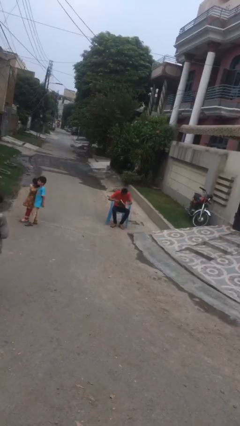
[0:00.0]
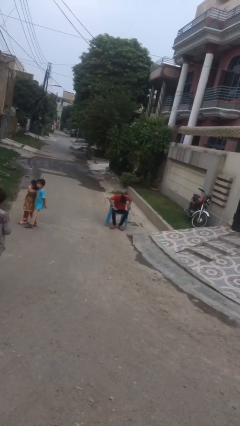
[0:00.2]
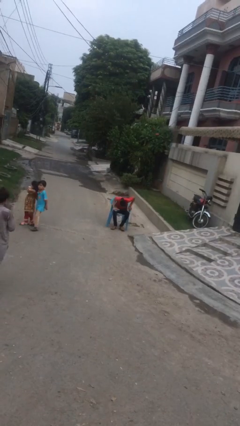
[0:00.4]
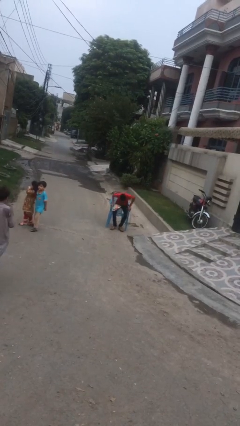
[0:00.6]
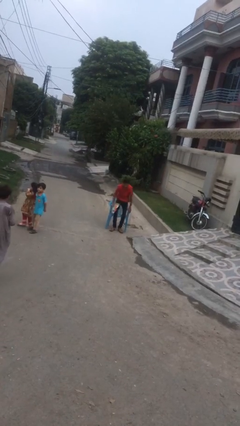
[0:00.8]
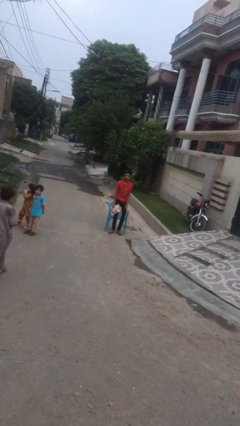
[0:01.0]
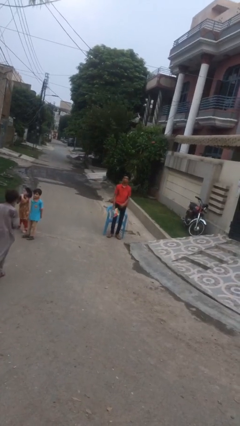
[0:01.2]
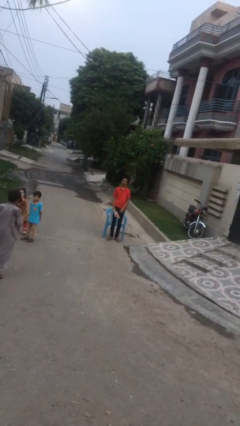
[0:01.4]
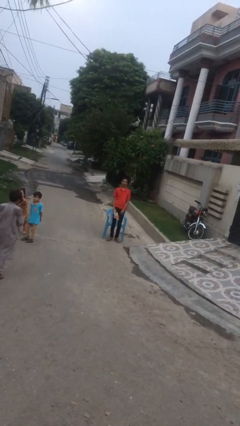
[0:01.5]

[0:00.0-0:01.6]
person stands up

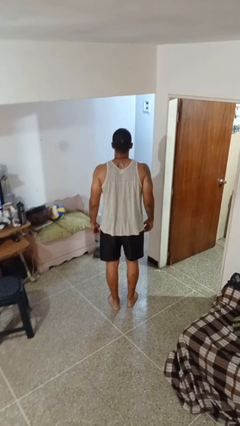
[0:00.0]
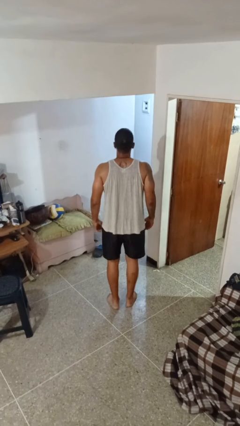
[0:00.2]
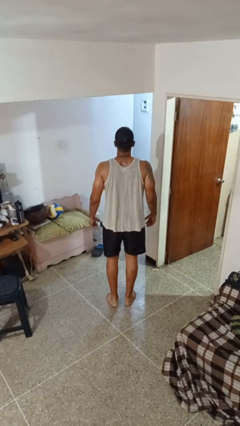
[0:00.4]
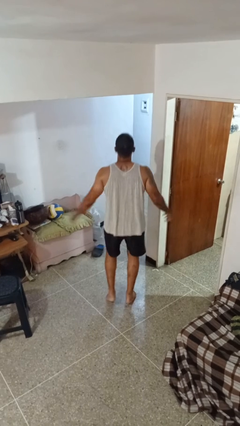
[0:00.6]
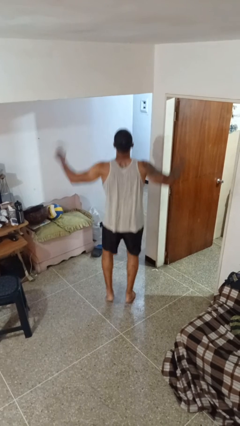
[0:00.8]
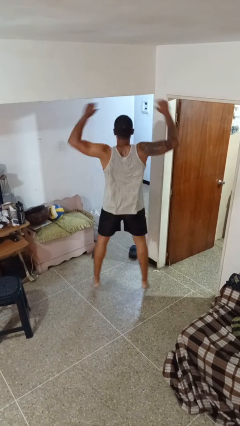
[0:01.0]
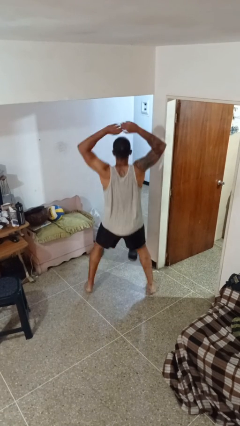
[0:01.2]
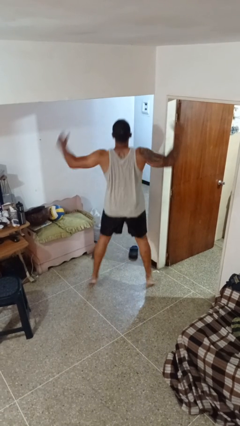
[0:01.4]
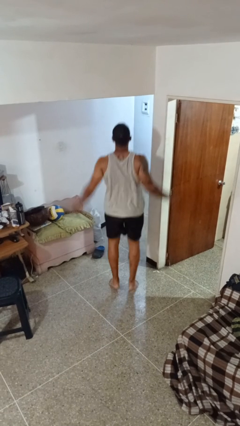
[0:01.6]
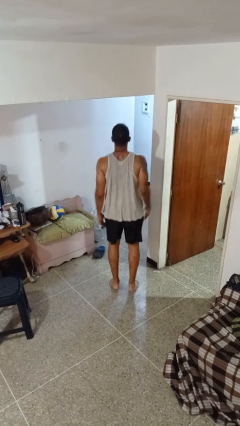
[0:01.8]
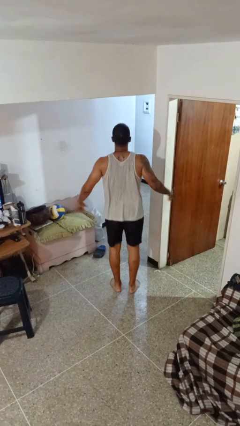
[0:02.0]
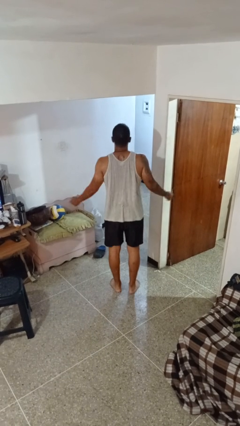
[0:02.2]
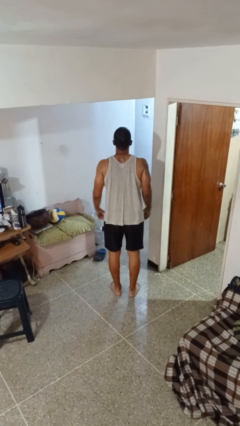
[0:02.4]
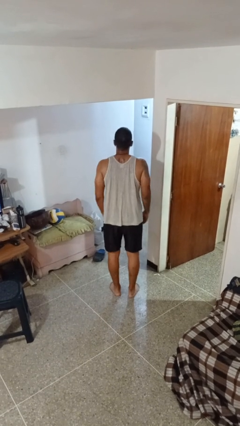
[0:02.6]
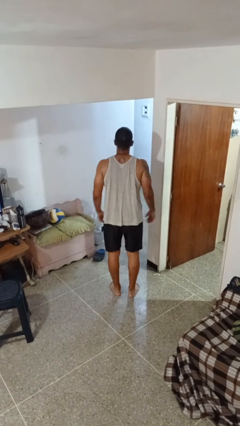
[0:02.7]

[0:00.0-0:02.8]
person exercises with jumping jacks

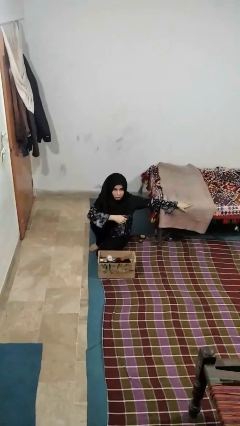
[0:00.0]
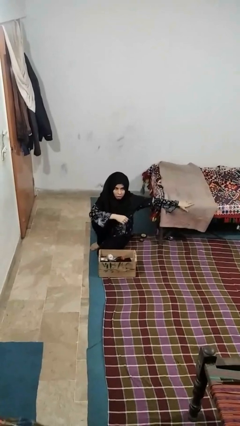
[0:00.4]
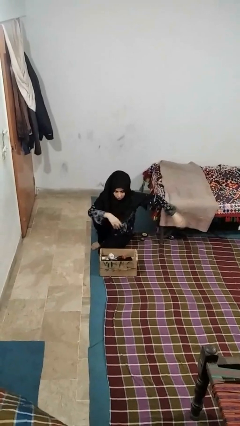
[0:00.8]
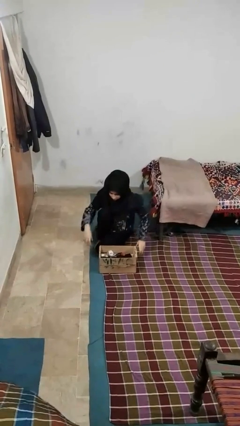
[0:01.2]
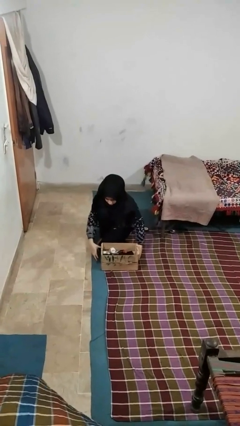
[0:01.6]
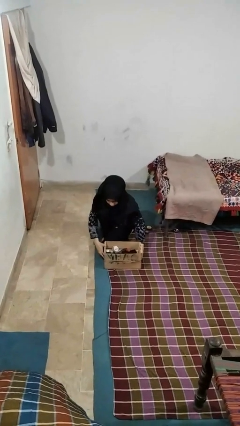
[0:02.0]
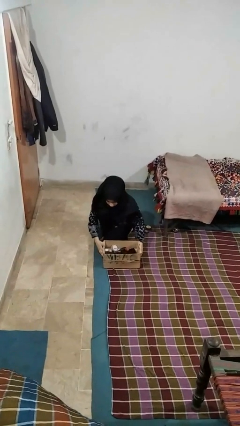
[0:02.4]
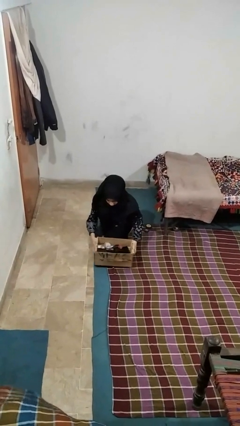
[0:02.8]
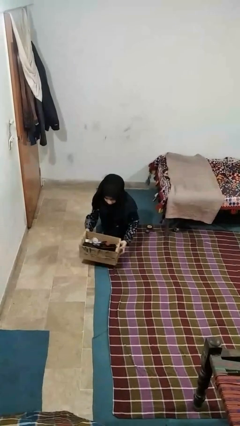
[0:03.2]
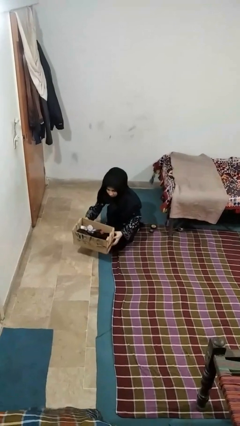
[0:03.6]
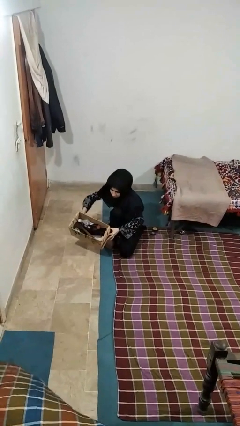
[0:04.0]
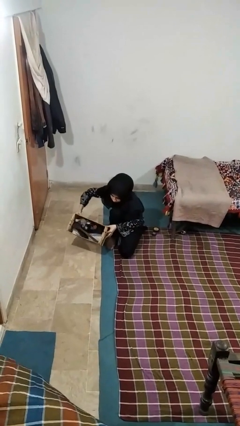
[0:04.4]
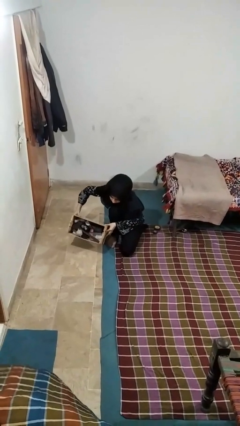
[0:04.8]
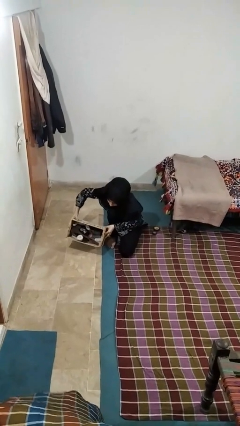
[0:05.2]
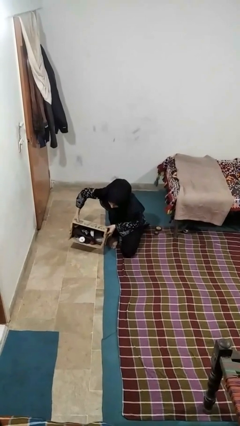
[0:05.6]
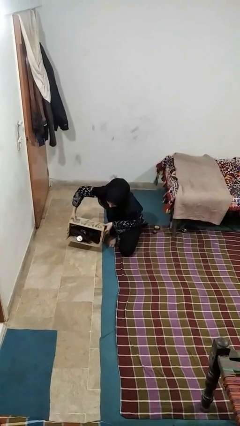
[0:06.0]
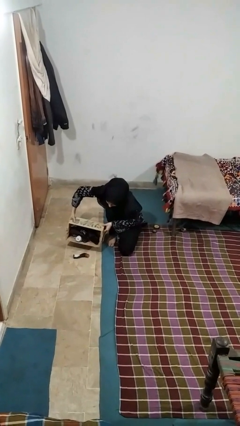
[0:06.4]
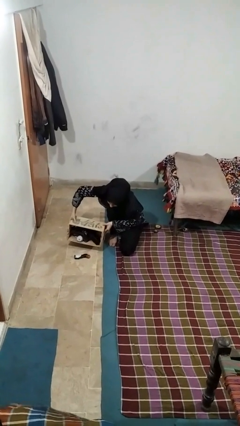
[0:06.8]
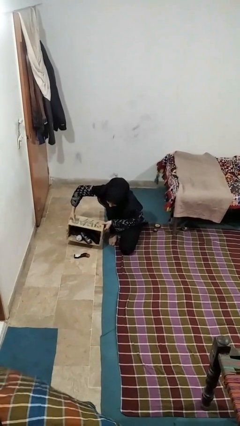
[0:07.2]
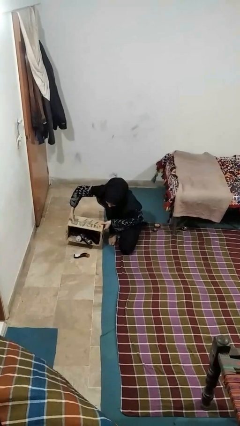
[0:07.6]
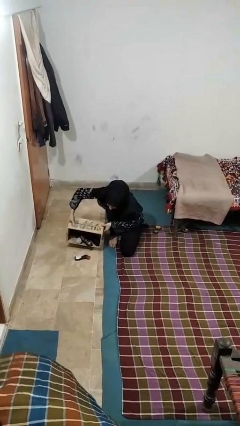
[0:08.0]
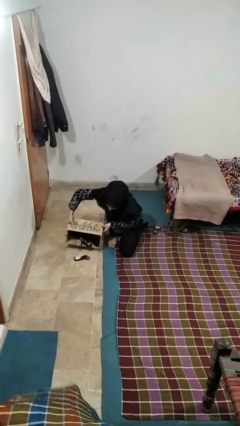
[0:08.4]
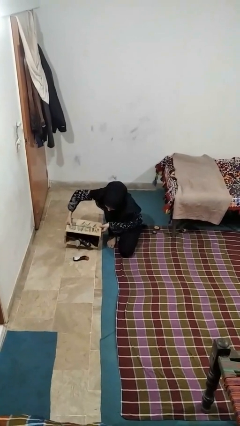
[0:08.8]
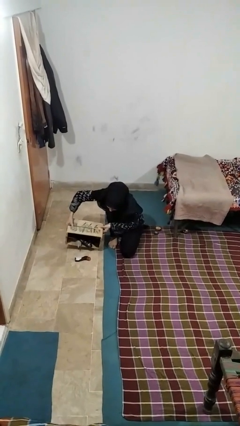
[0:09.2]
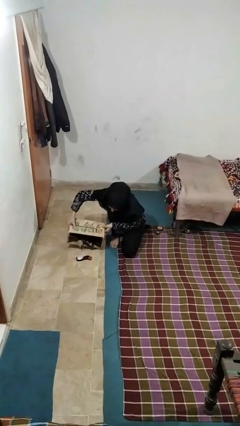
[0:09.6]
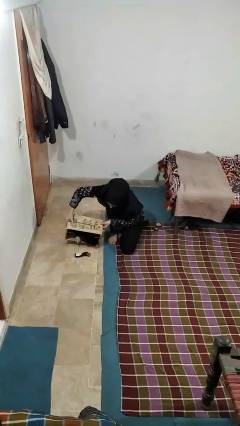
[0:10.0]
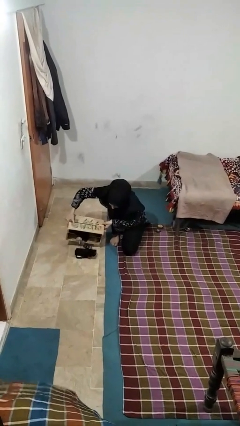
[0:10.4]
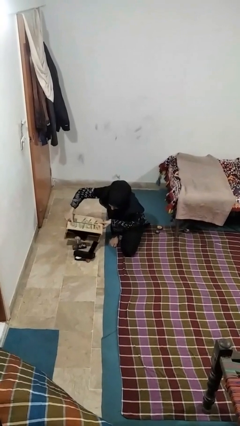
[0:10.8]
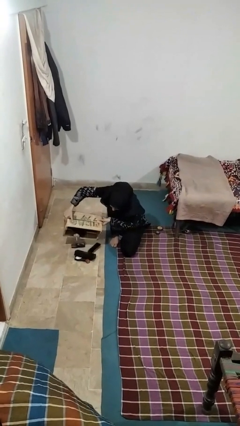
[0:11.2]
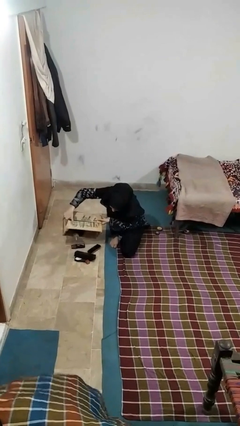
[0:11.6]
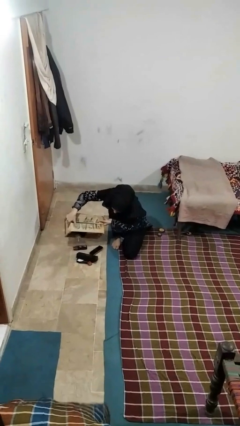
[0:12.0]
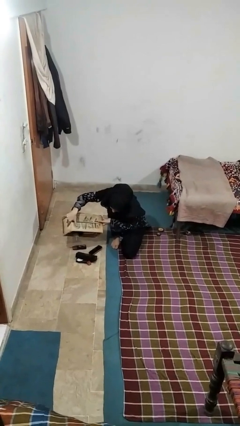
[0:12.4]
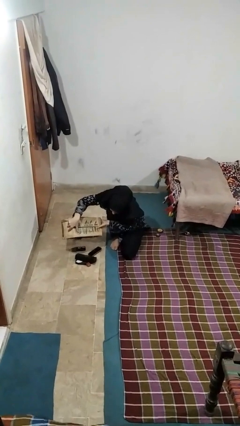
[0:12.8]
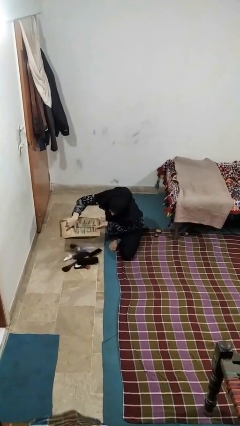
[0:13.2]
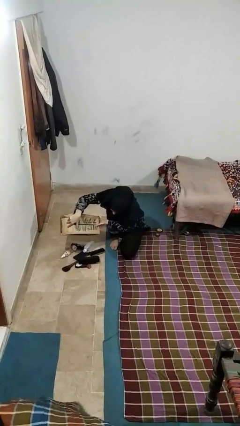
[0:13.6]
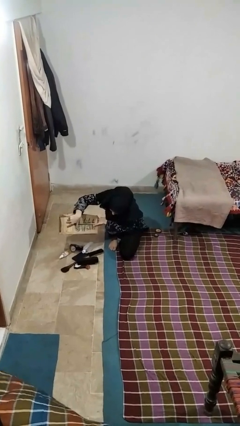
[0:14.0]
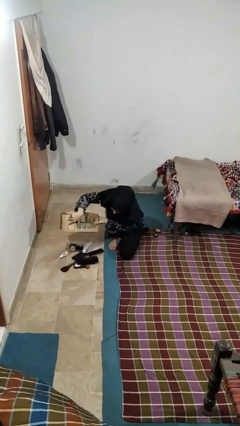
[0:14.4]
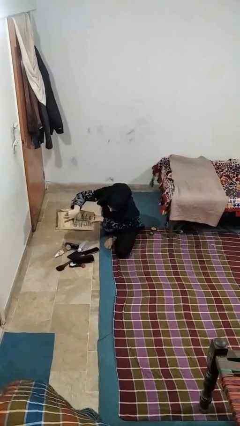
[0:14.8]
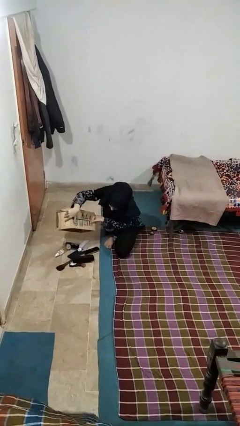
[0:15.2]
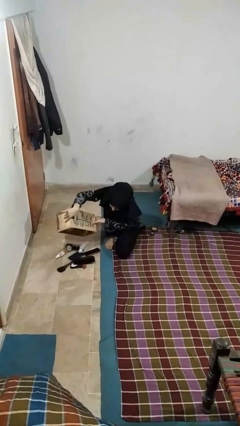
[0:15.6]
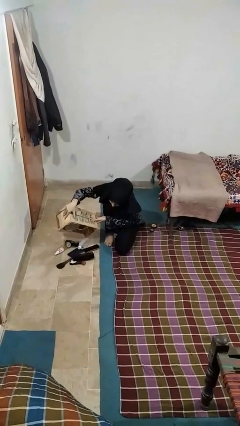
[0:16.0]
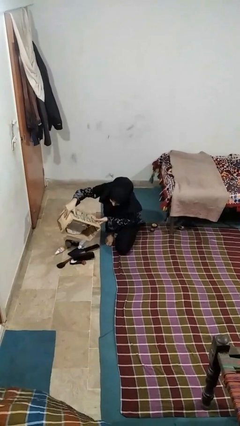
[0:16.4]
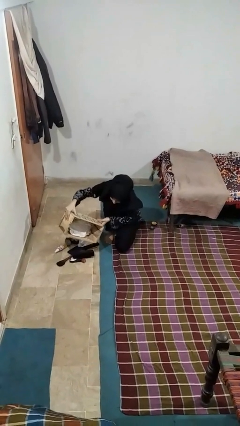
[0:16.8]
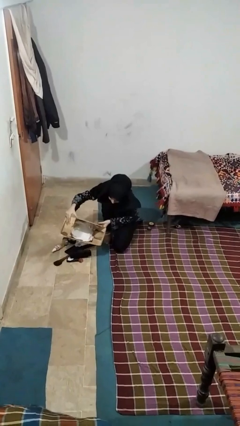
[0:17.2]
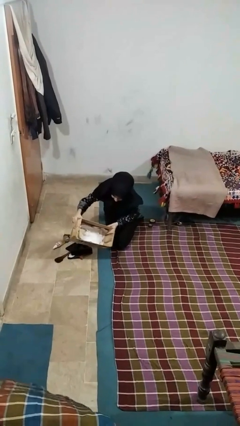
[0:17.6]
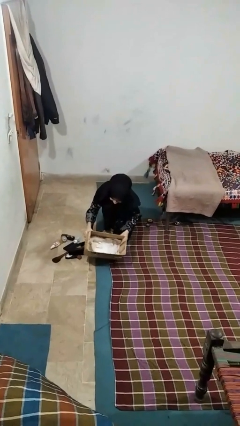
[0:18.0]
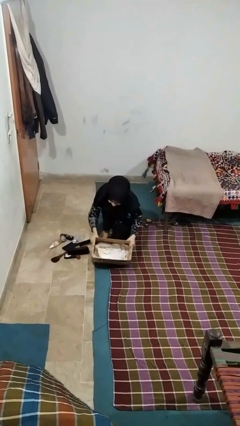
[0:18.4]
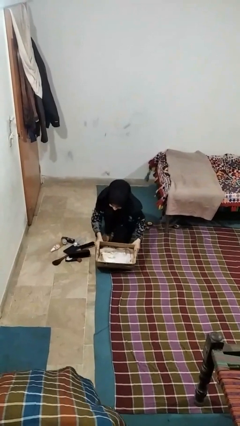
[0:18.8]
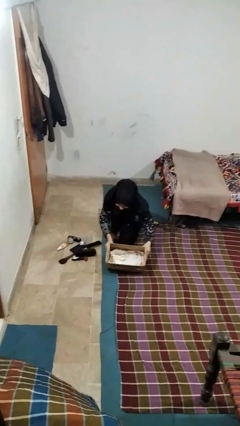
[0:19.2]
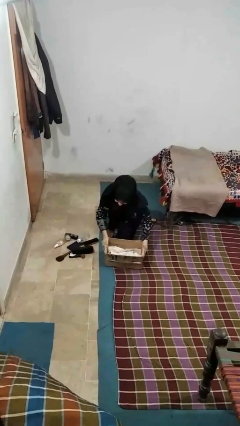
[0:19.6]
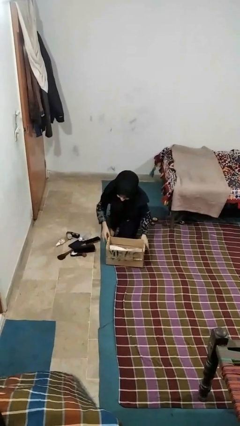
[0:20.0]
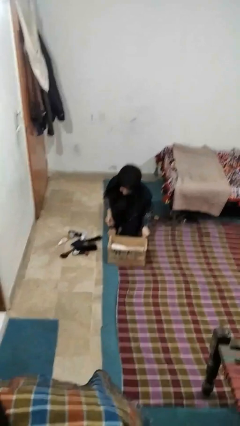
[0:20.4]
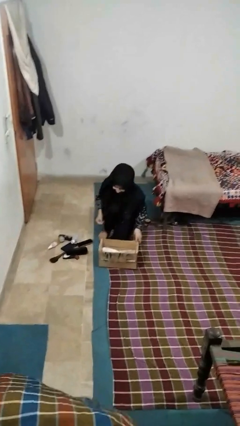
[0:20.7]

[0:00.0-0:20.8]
person unloads box onto floor

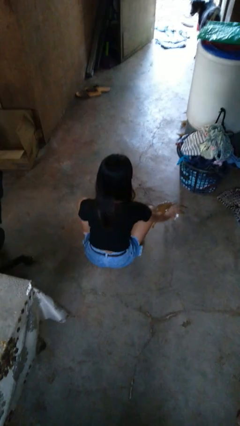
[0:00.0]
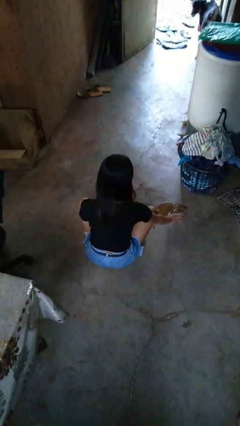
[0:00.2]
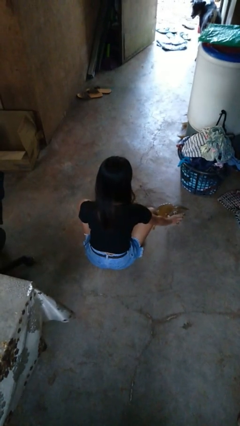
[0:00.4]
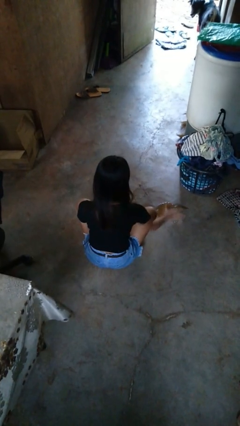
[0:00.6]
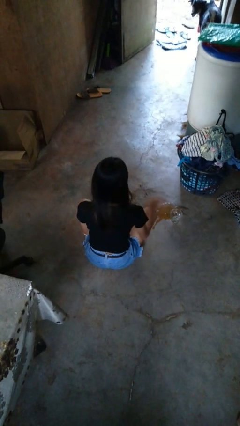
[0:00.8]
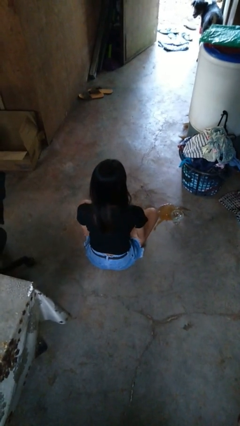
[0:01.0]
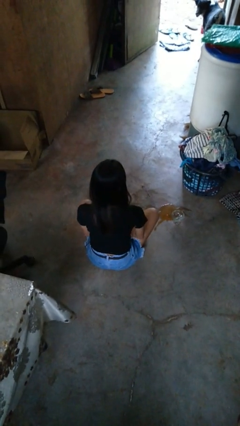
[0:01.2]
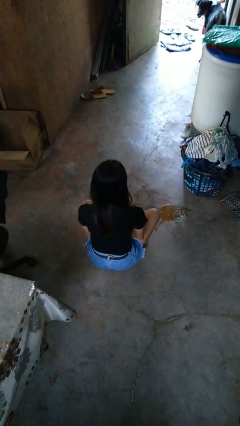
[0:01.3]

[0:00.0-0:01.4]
person sets upright glass

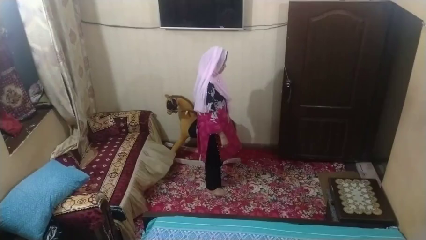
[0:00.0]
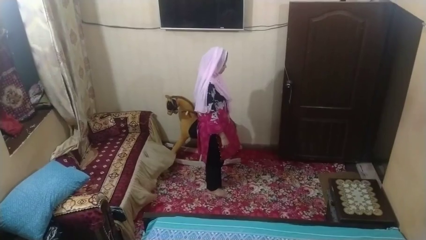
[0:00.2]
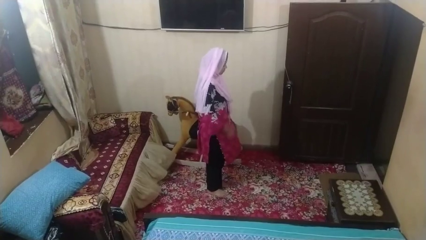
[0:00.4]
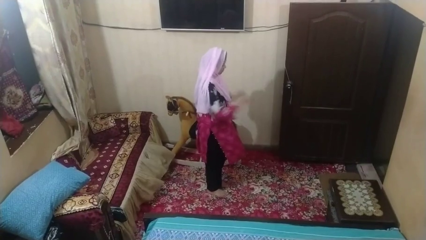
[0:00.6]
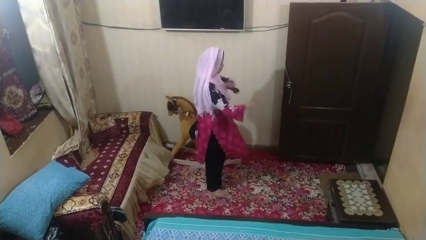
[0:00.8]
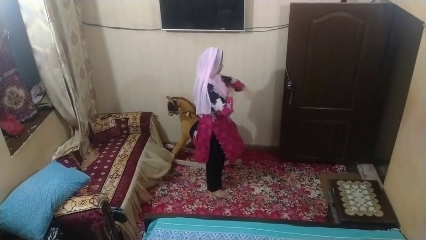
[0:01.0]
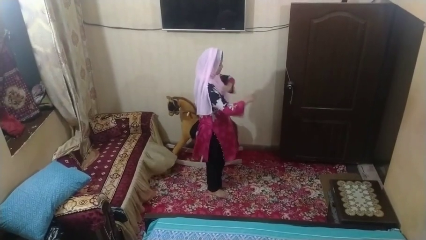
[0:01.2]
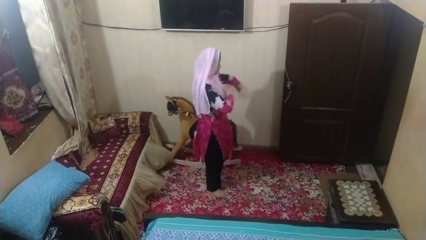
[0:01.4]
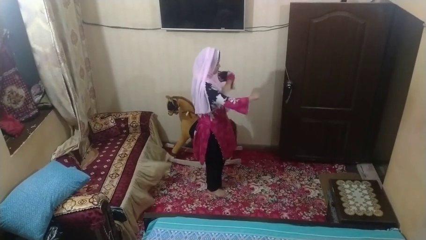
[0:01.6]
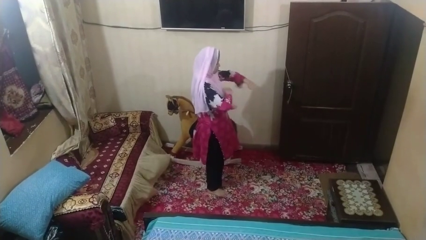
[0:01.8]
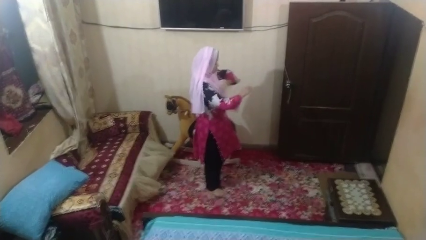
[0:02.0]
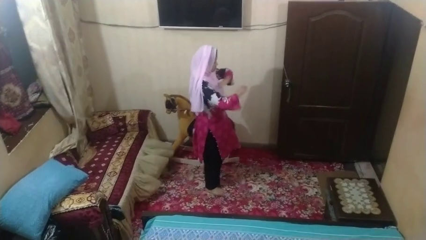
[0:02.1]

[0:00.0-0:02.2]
person karate chop
